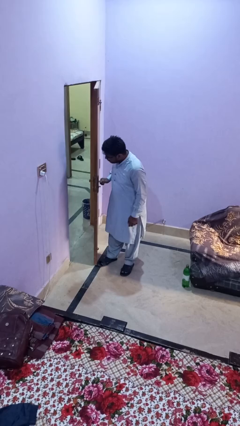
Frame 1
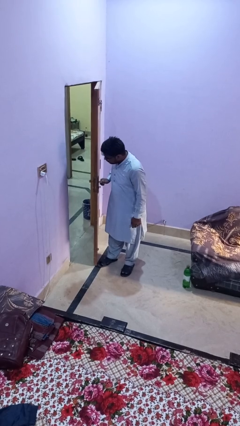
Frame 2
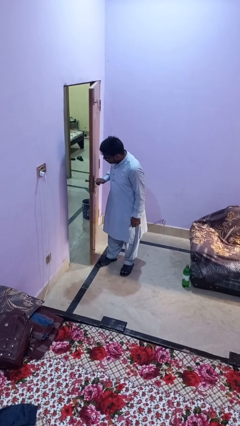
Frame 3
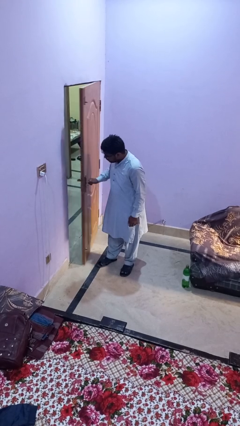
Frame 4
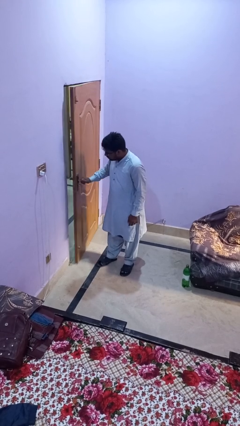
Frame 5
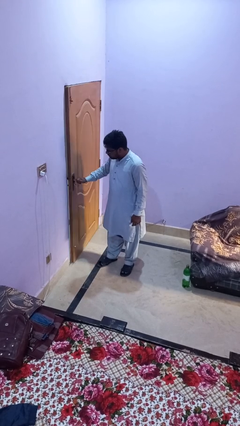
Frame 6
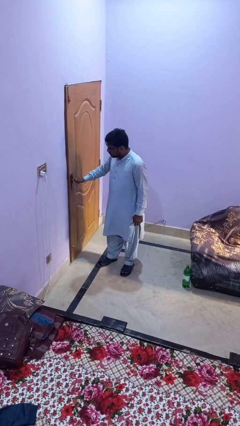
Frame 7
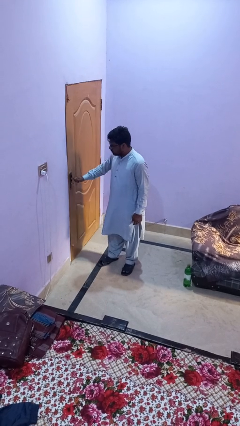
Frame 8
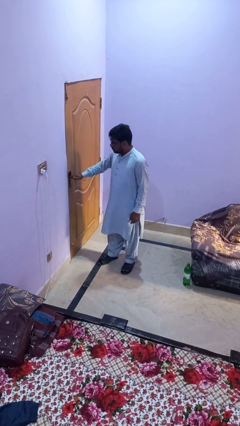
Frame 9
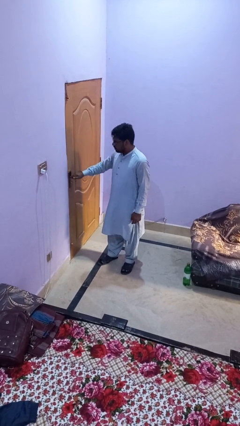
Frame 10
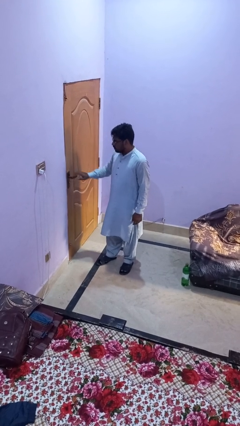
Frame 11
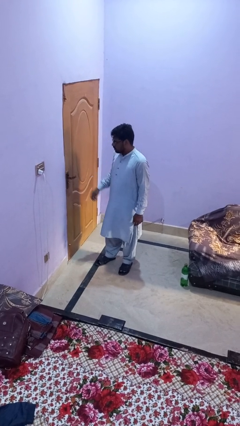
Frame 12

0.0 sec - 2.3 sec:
person closes facility door

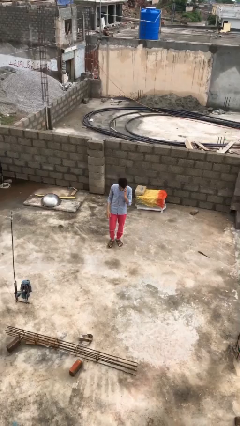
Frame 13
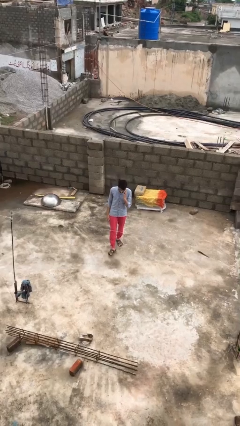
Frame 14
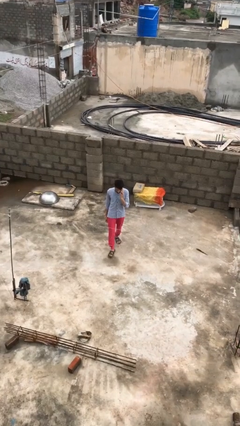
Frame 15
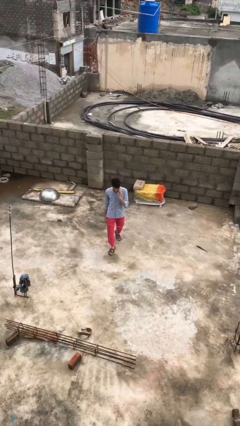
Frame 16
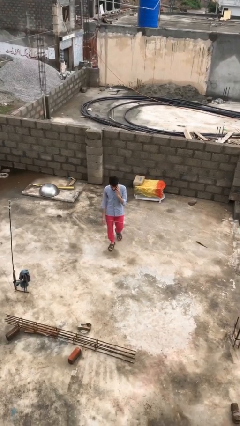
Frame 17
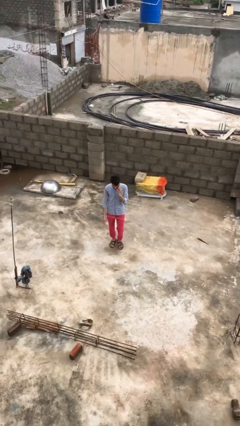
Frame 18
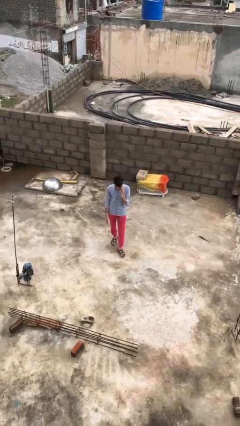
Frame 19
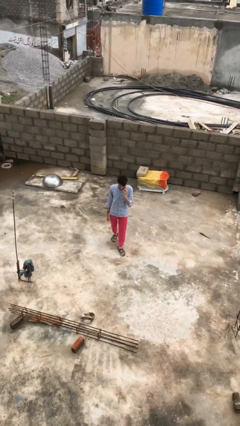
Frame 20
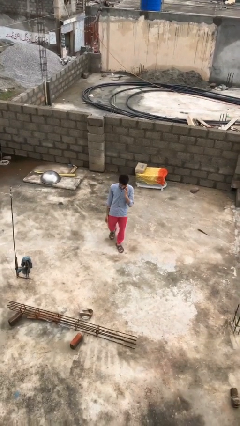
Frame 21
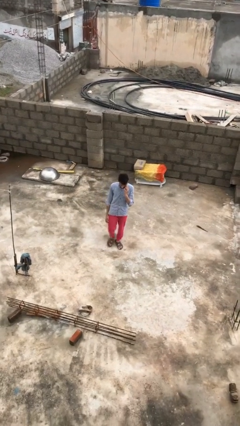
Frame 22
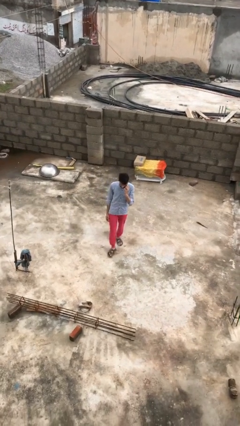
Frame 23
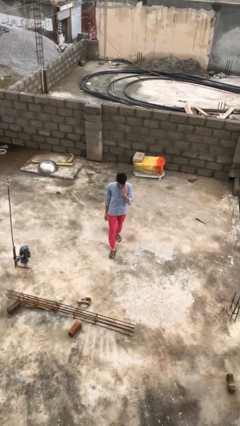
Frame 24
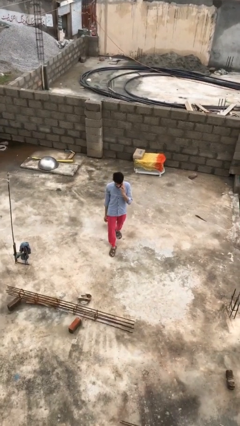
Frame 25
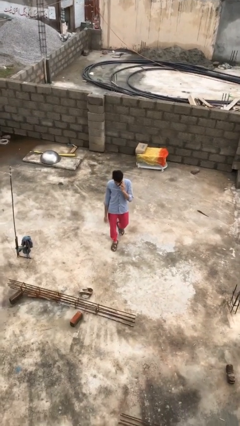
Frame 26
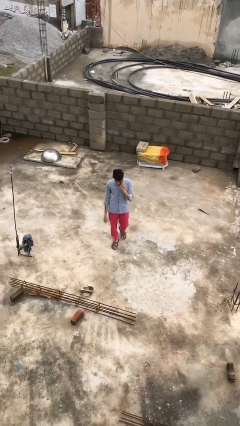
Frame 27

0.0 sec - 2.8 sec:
person talks on phone

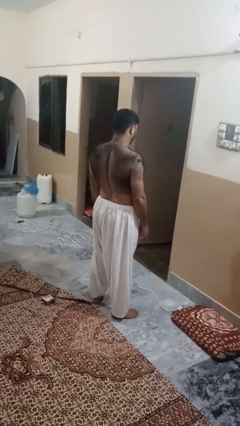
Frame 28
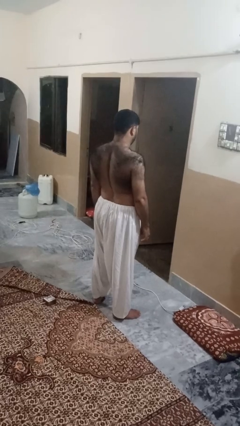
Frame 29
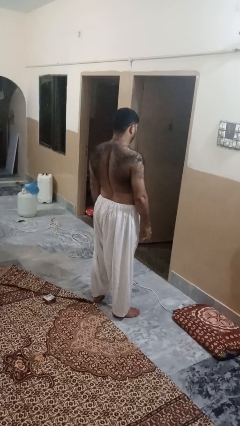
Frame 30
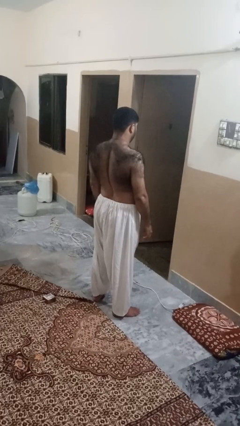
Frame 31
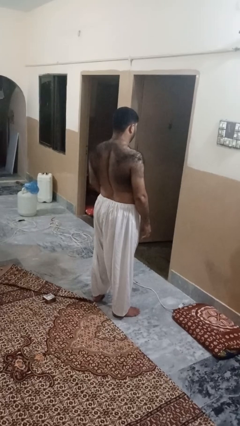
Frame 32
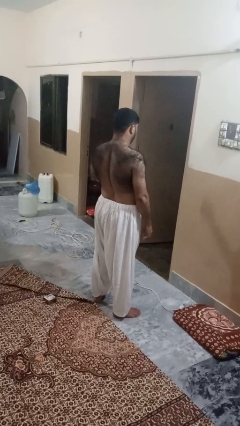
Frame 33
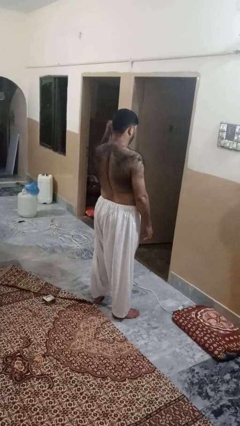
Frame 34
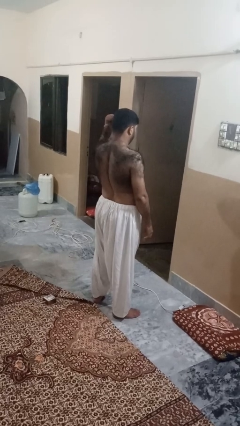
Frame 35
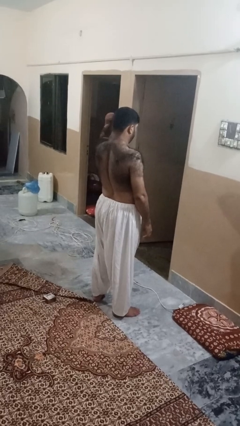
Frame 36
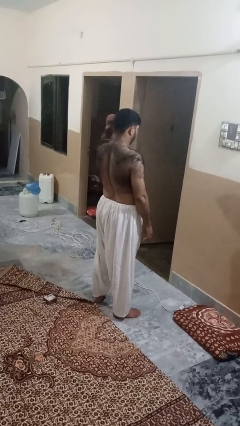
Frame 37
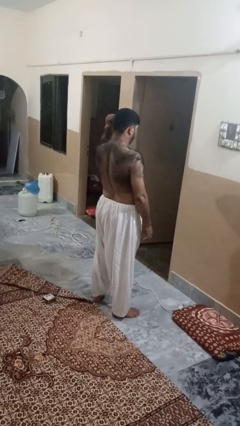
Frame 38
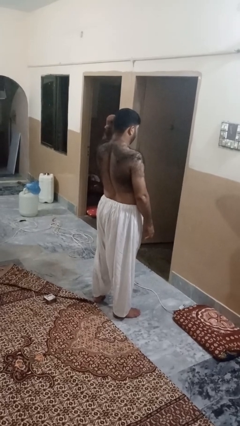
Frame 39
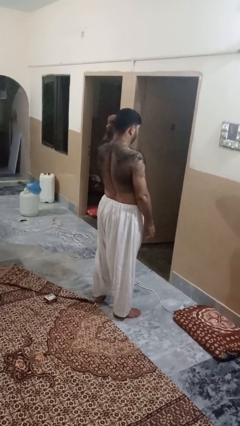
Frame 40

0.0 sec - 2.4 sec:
person gestures behind me

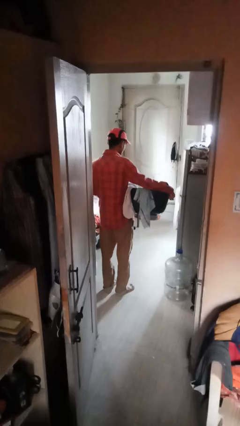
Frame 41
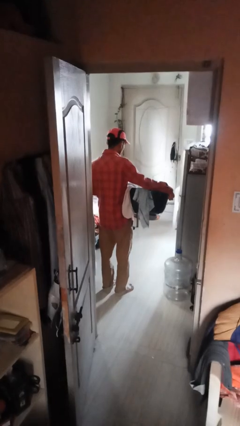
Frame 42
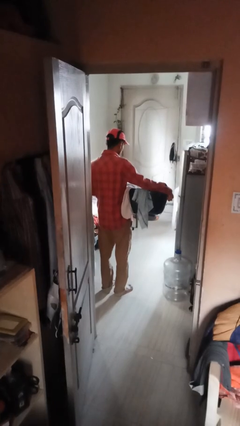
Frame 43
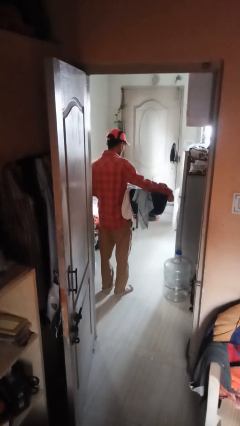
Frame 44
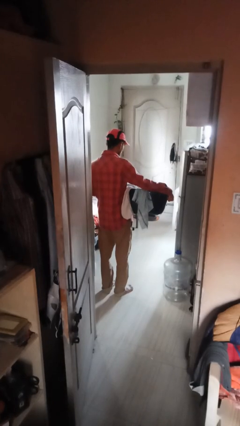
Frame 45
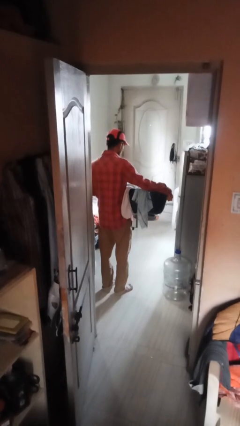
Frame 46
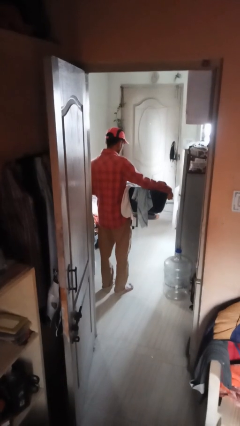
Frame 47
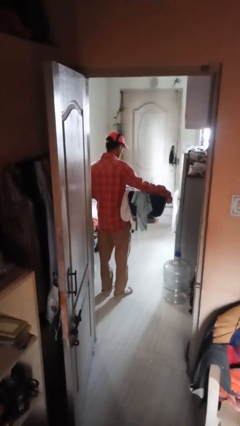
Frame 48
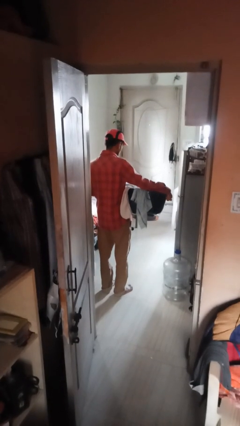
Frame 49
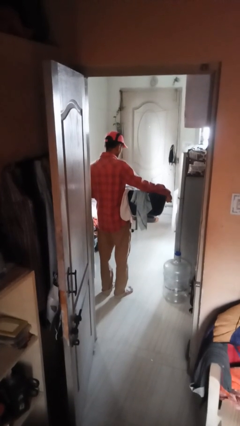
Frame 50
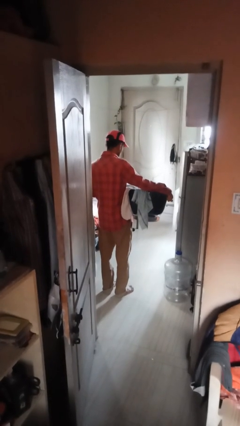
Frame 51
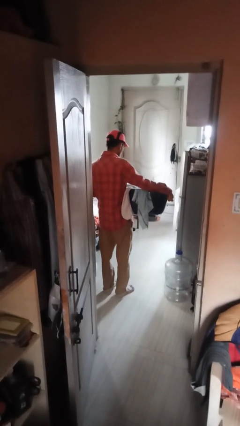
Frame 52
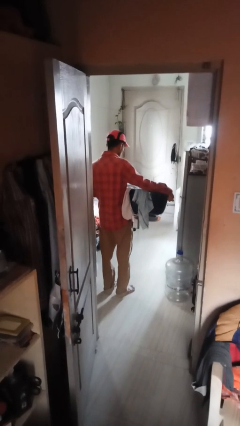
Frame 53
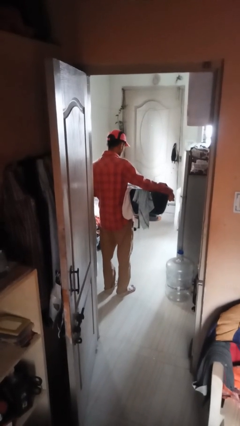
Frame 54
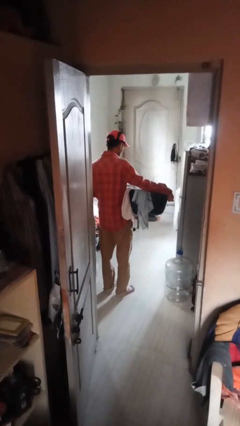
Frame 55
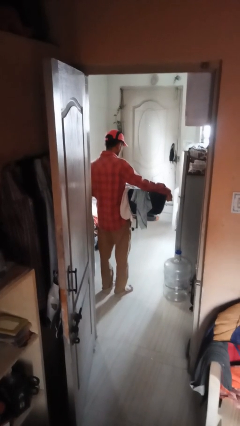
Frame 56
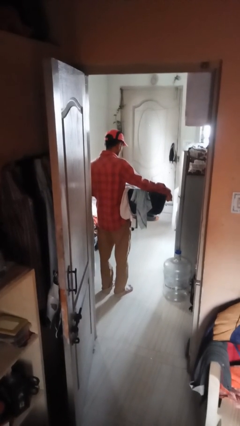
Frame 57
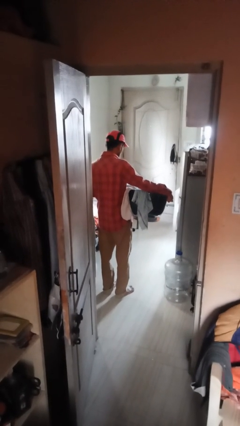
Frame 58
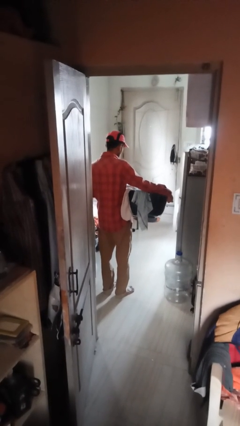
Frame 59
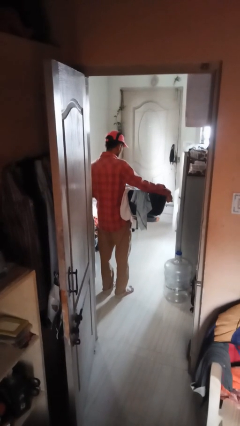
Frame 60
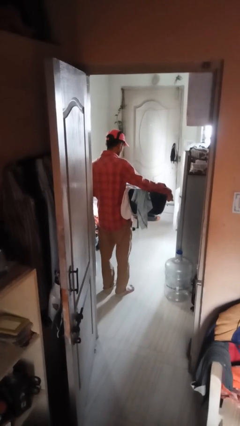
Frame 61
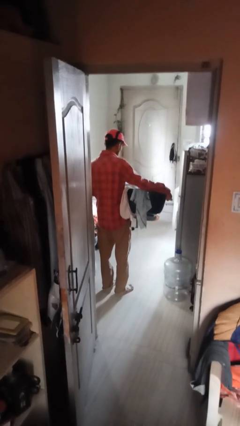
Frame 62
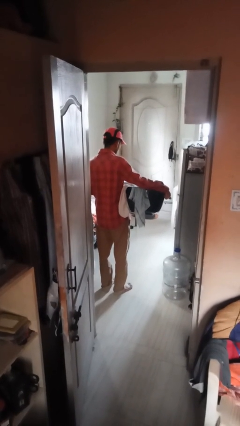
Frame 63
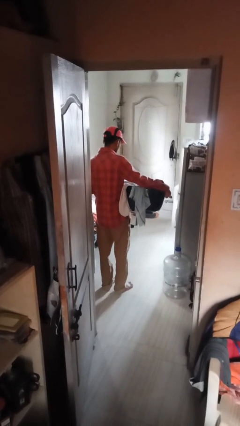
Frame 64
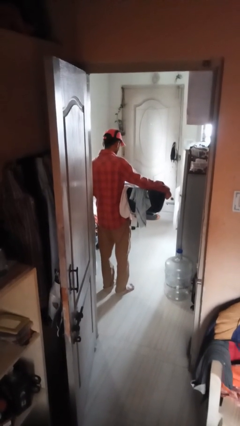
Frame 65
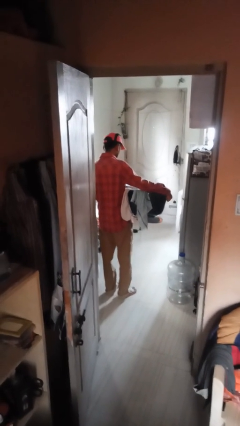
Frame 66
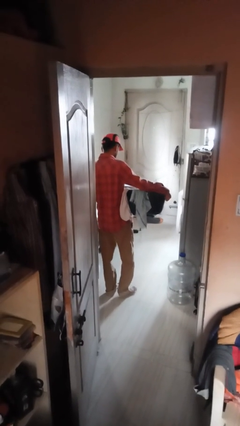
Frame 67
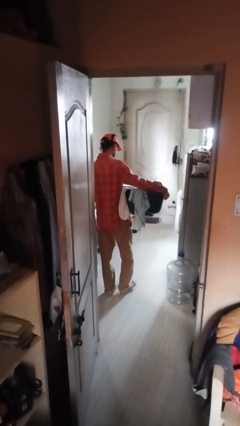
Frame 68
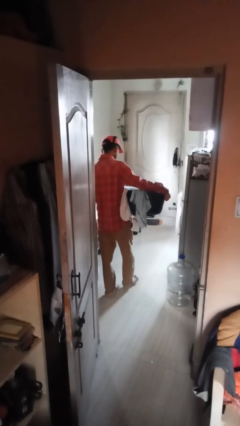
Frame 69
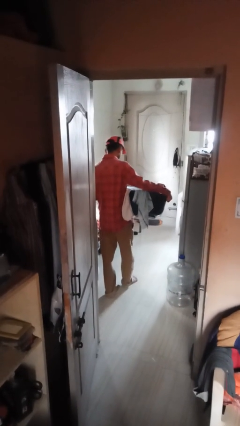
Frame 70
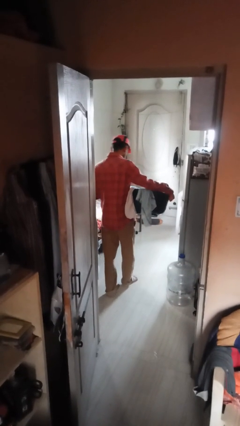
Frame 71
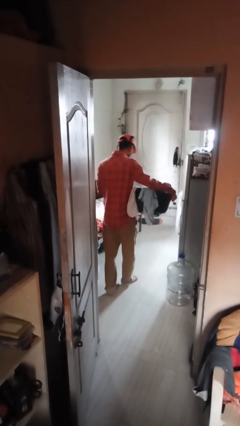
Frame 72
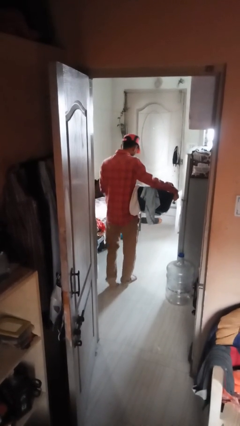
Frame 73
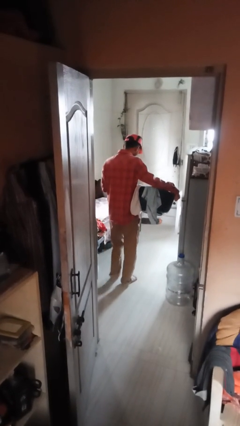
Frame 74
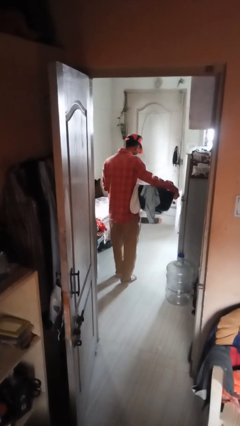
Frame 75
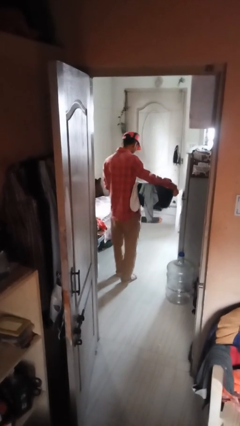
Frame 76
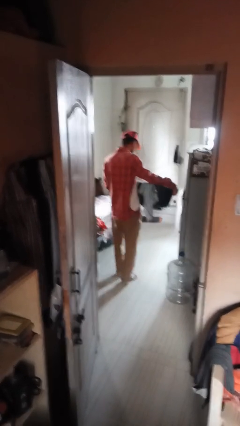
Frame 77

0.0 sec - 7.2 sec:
person carries furniture

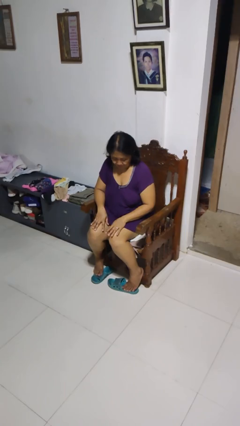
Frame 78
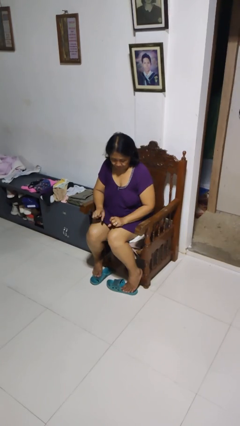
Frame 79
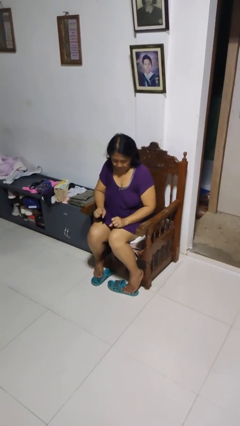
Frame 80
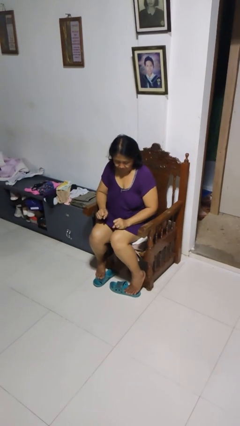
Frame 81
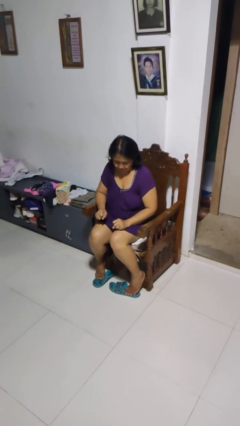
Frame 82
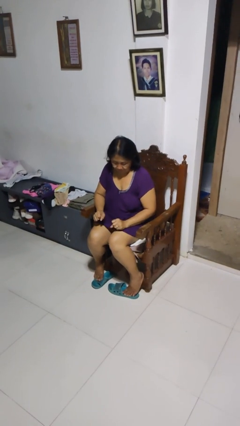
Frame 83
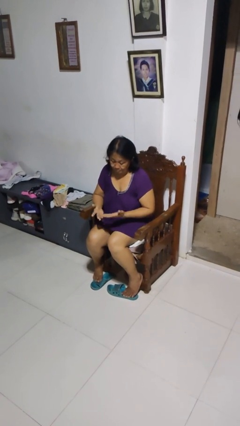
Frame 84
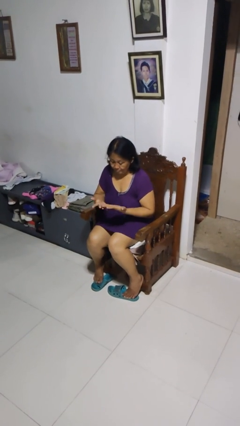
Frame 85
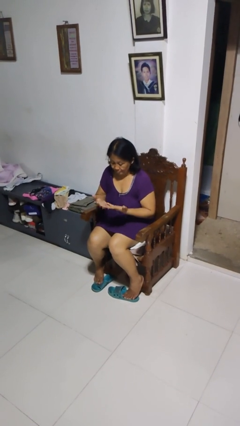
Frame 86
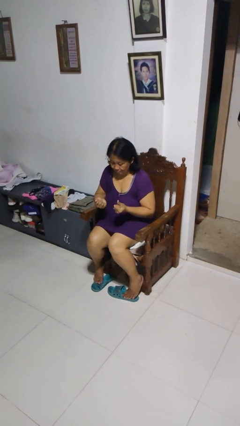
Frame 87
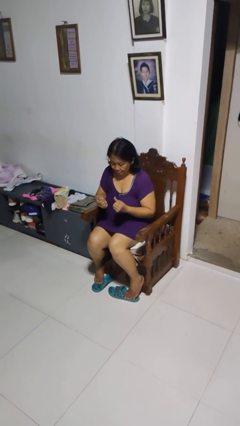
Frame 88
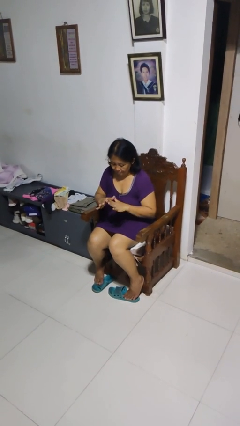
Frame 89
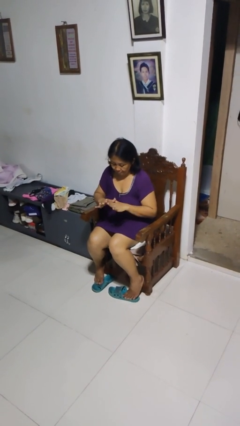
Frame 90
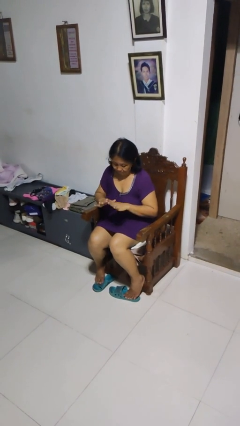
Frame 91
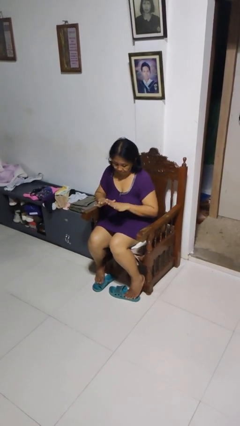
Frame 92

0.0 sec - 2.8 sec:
person looks at hands in lap
